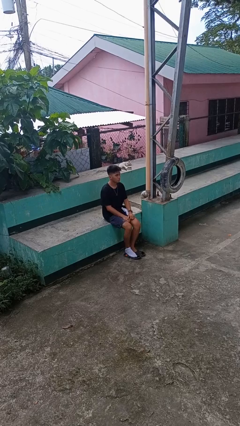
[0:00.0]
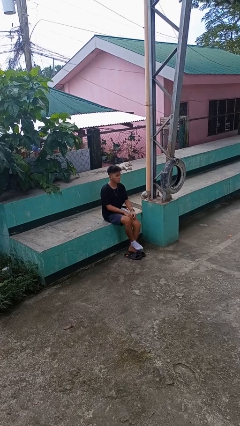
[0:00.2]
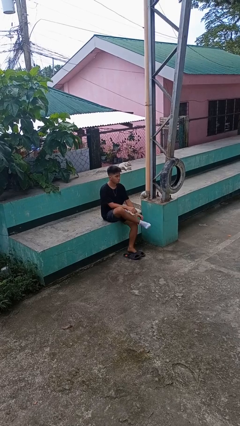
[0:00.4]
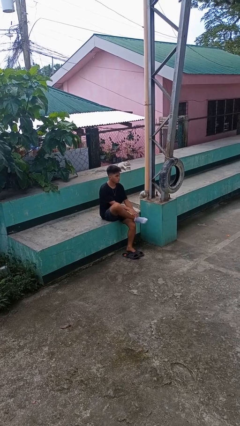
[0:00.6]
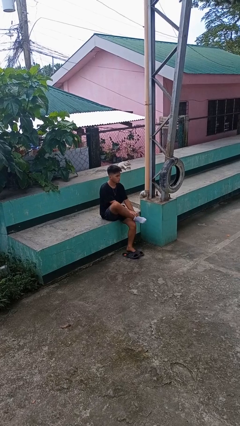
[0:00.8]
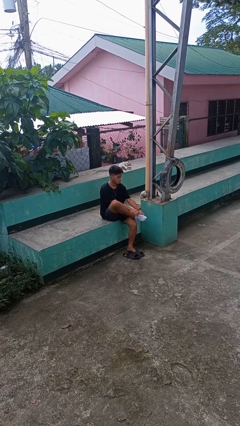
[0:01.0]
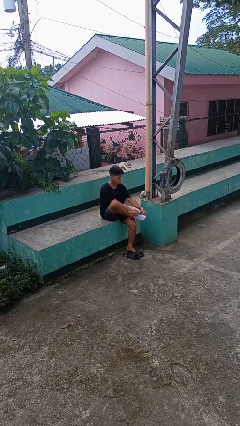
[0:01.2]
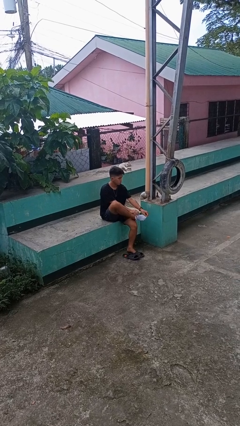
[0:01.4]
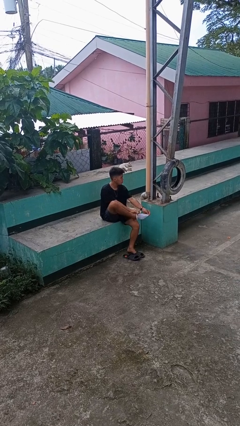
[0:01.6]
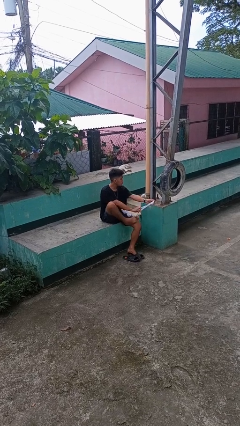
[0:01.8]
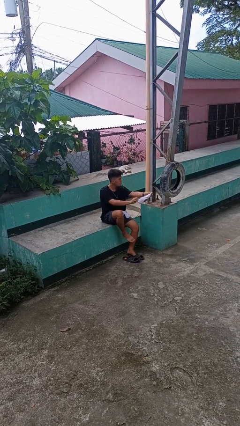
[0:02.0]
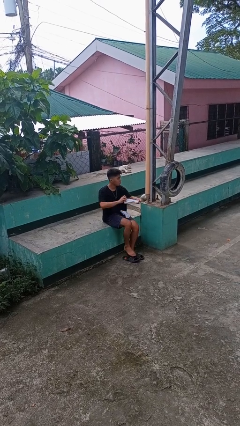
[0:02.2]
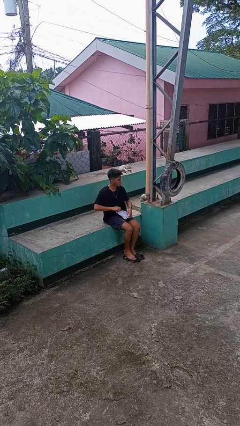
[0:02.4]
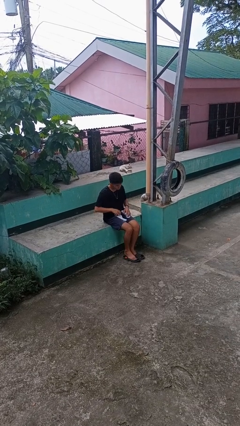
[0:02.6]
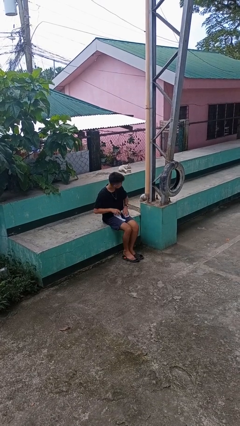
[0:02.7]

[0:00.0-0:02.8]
person takes off socks

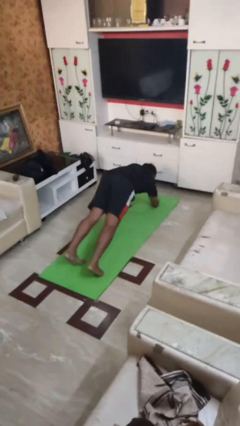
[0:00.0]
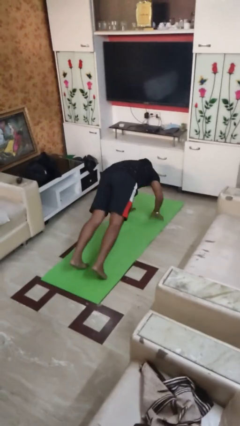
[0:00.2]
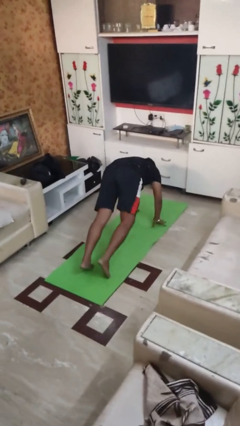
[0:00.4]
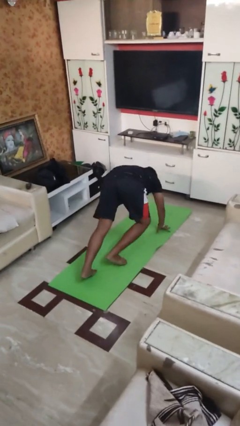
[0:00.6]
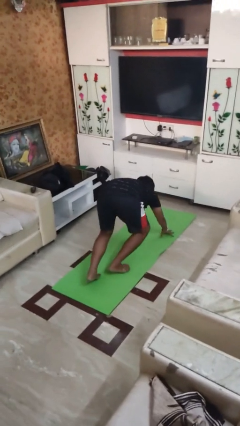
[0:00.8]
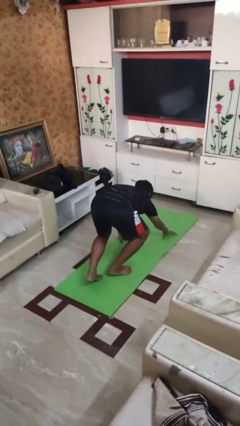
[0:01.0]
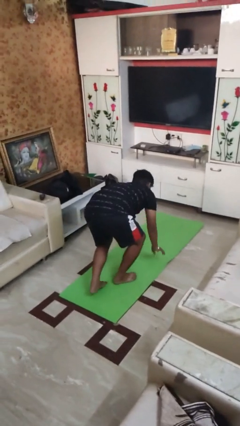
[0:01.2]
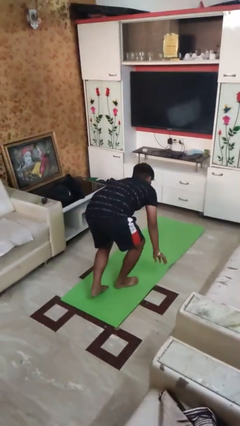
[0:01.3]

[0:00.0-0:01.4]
person stands up from floor

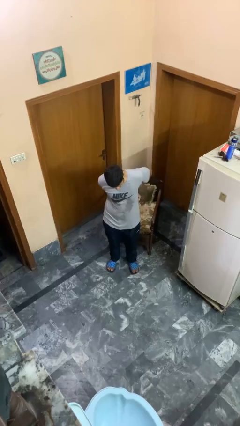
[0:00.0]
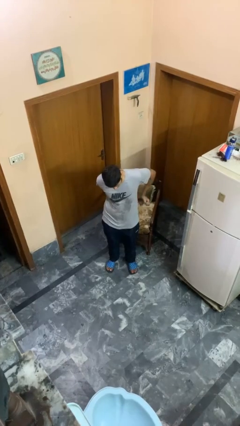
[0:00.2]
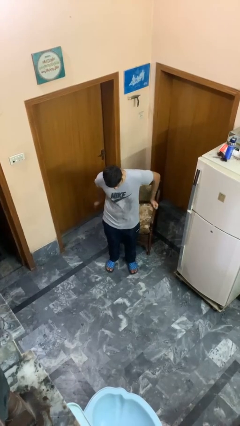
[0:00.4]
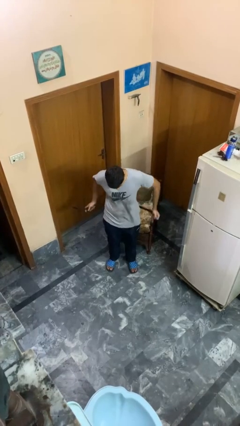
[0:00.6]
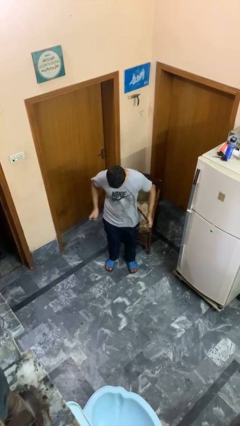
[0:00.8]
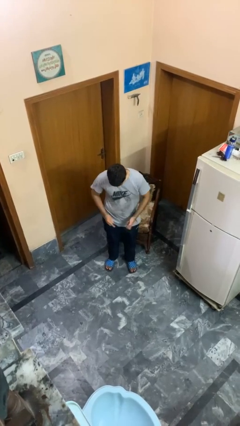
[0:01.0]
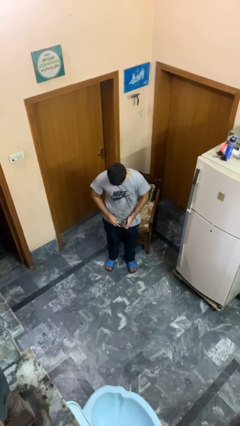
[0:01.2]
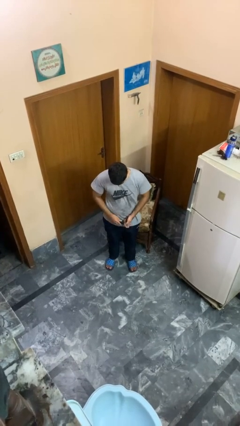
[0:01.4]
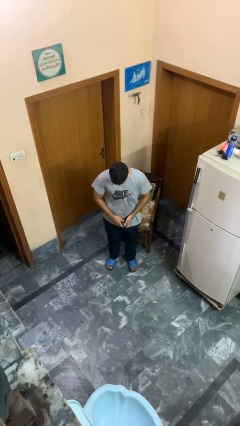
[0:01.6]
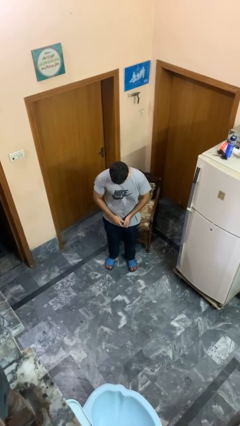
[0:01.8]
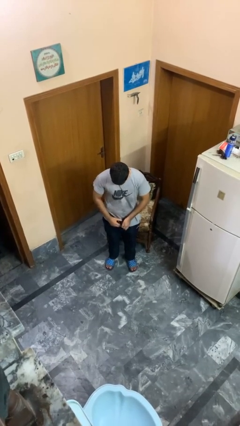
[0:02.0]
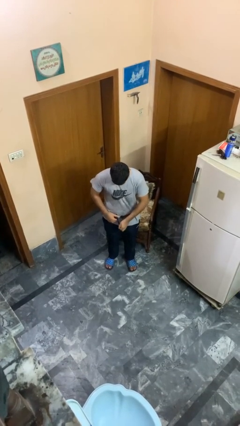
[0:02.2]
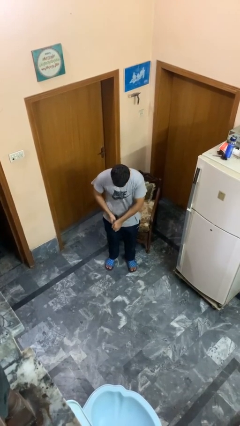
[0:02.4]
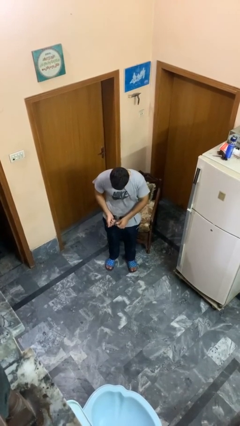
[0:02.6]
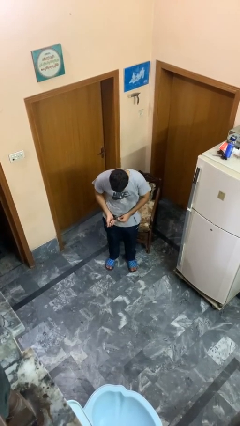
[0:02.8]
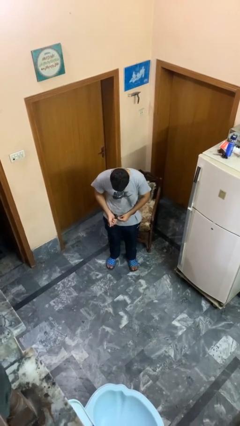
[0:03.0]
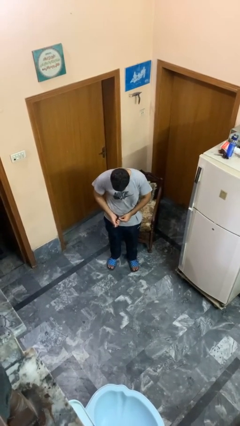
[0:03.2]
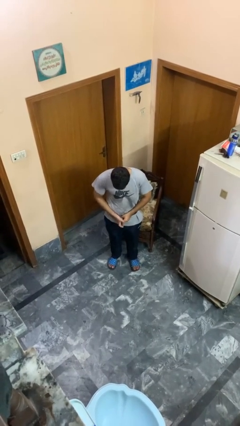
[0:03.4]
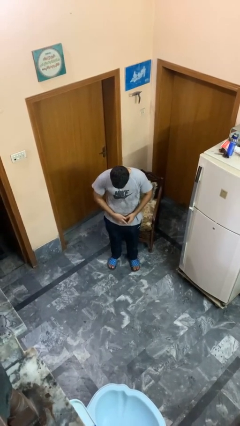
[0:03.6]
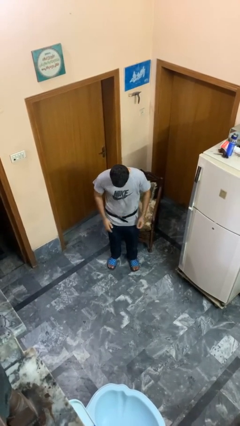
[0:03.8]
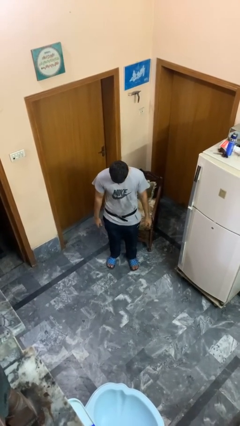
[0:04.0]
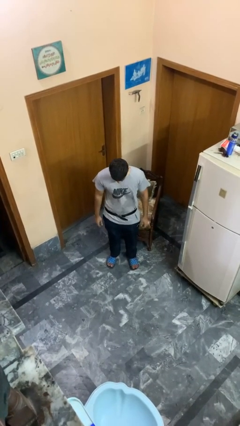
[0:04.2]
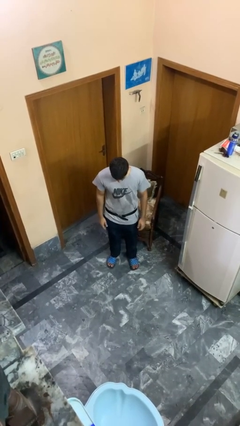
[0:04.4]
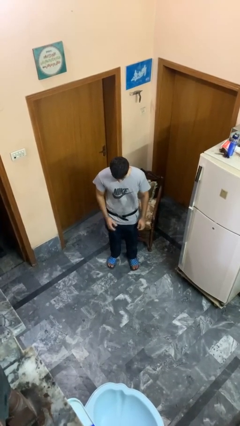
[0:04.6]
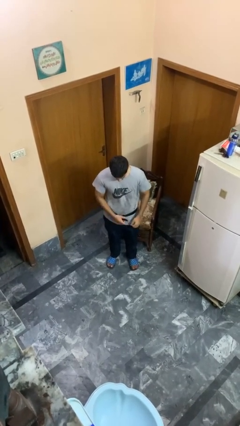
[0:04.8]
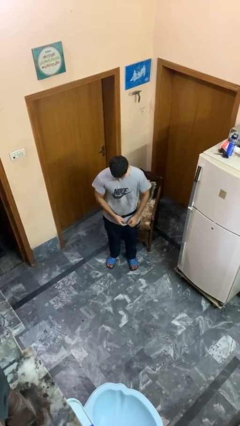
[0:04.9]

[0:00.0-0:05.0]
person puts on belt

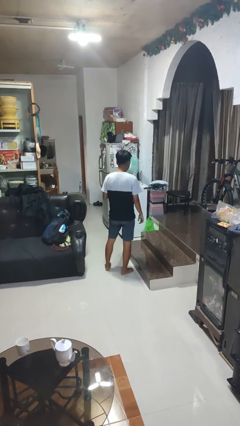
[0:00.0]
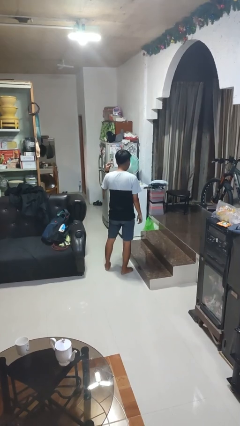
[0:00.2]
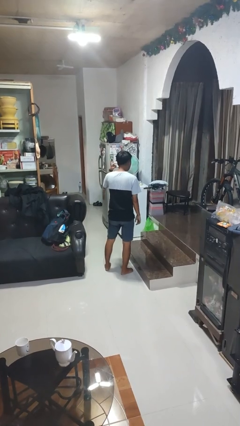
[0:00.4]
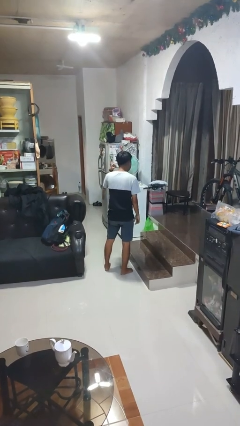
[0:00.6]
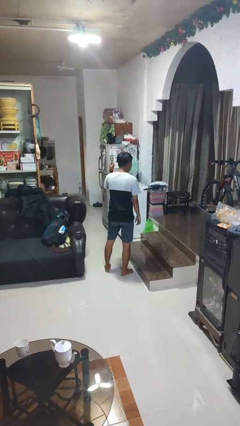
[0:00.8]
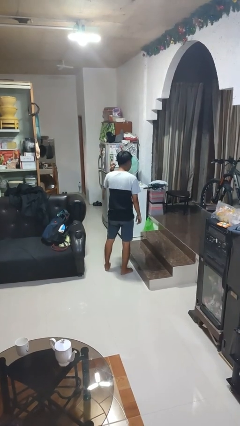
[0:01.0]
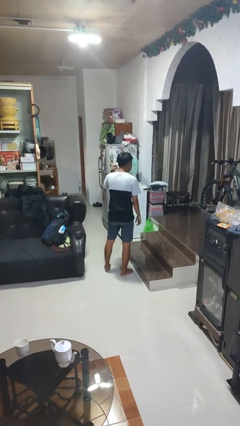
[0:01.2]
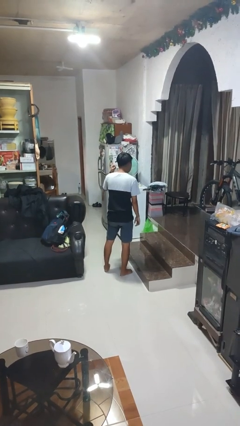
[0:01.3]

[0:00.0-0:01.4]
person gestures listen closely

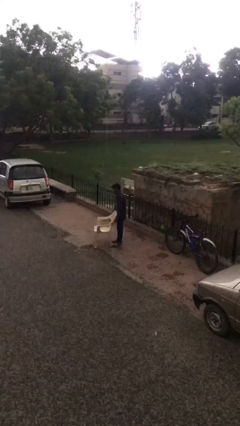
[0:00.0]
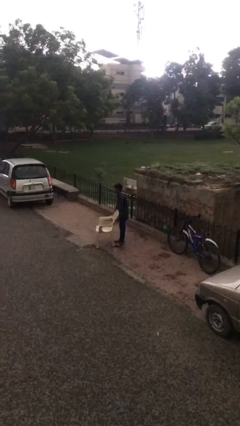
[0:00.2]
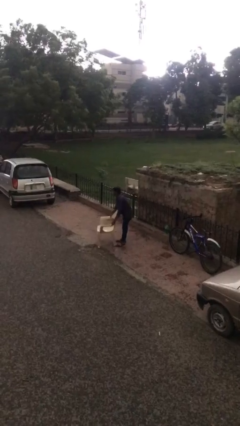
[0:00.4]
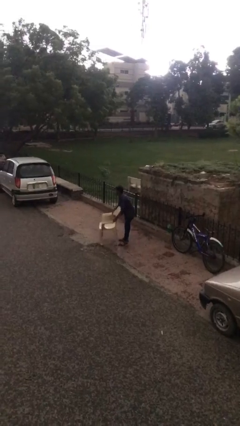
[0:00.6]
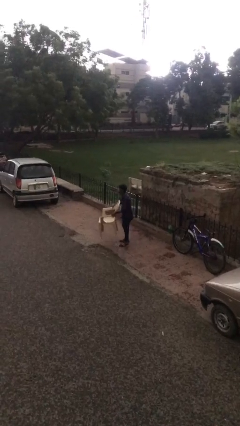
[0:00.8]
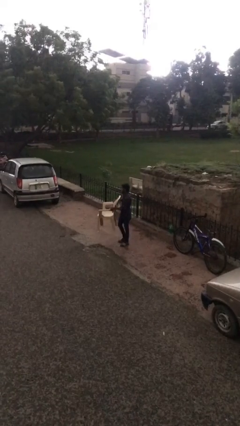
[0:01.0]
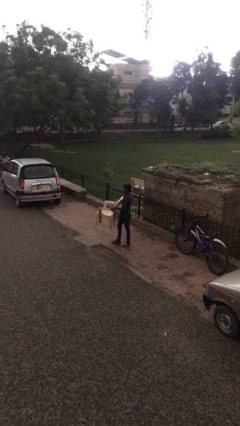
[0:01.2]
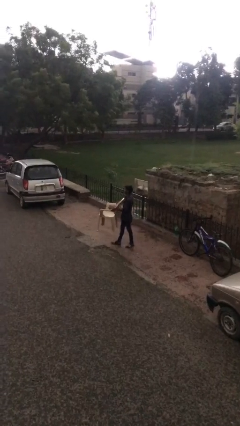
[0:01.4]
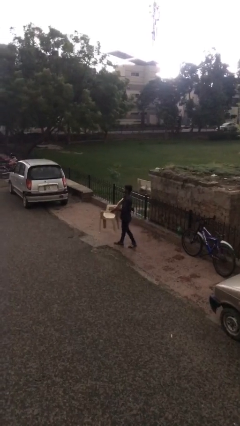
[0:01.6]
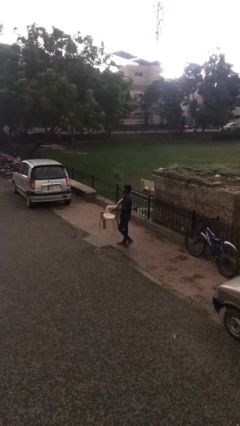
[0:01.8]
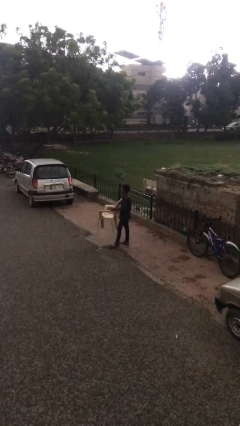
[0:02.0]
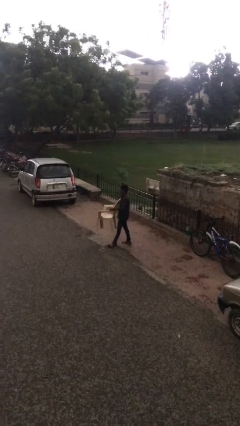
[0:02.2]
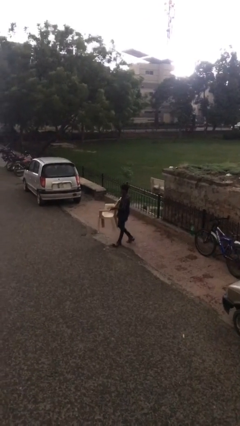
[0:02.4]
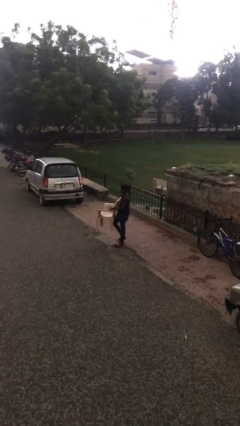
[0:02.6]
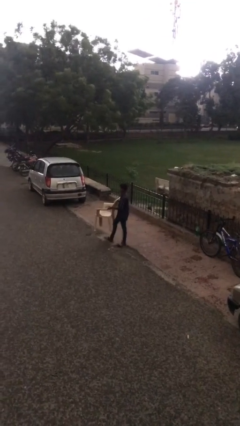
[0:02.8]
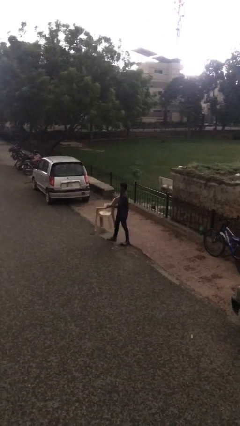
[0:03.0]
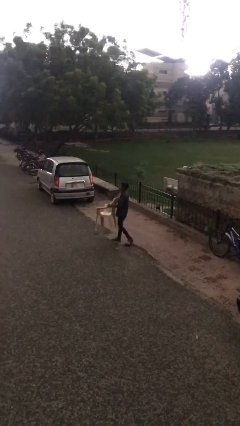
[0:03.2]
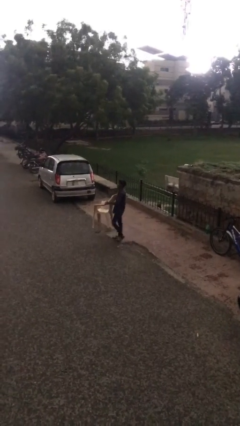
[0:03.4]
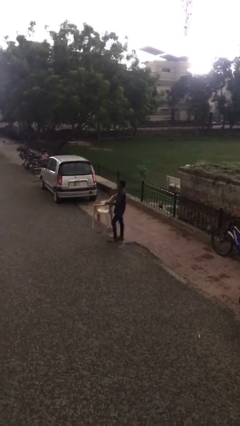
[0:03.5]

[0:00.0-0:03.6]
person carries heavy object

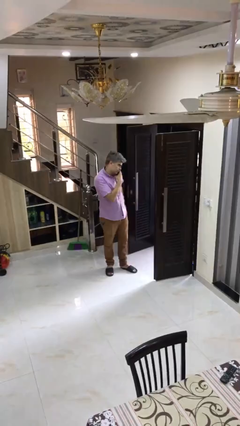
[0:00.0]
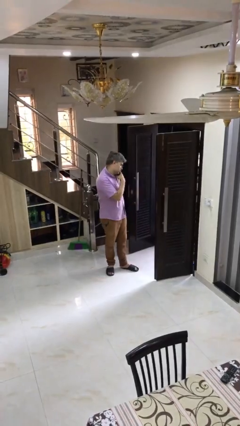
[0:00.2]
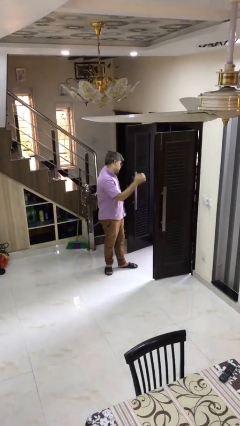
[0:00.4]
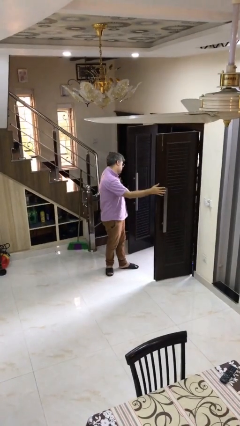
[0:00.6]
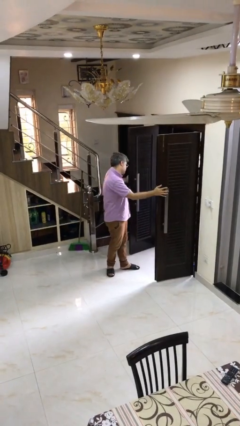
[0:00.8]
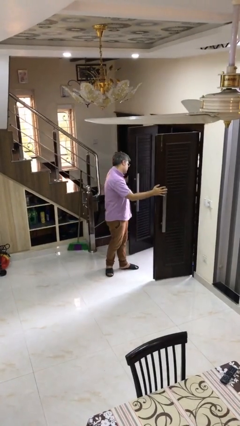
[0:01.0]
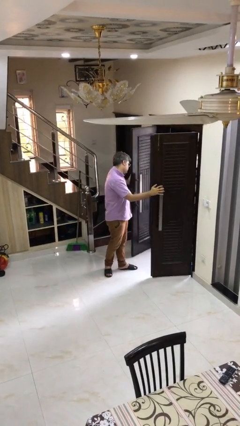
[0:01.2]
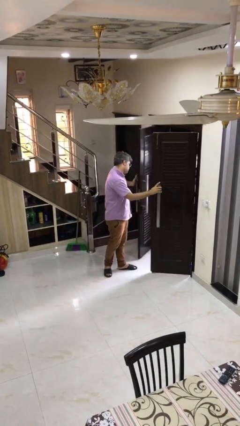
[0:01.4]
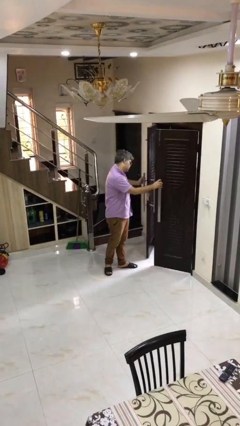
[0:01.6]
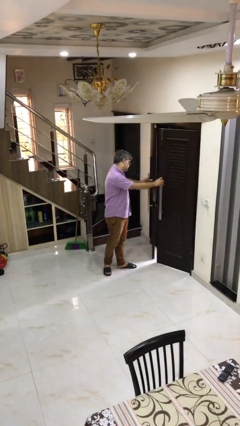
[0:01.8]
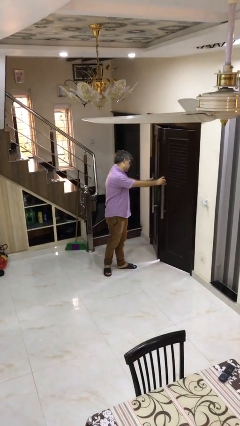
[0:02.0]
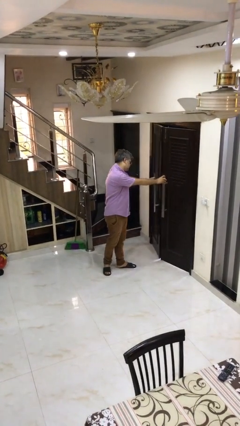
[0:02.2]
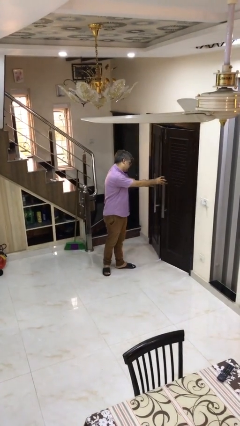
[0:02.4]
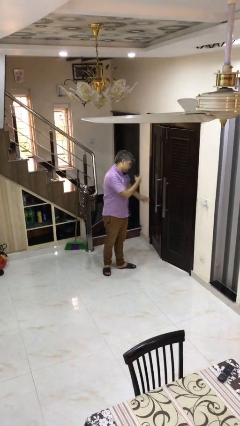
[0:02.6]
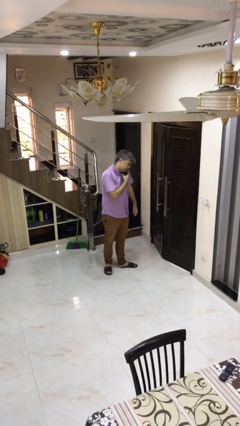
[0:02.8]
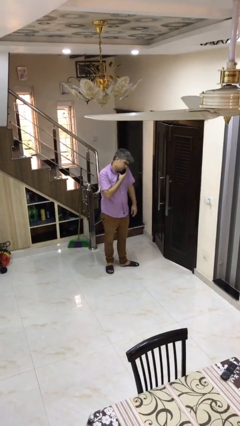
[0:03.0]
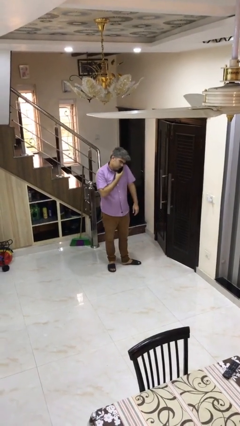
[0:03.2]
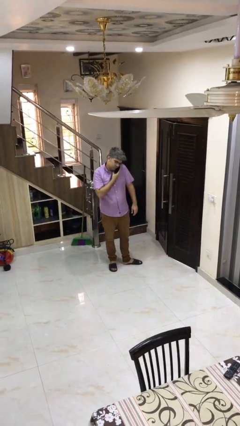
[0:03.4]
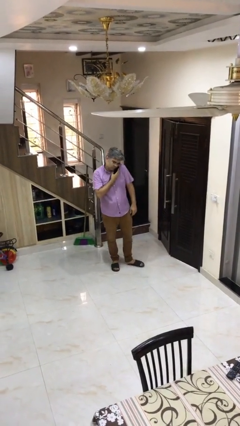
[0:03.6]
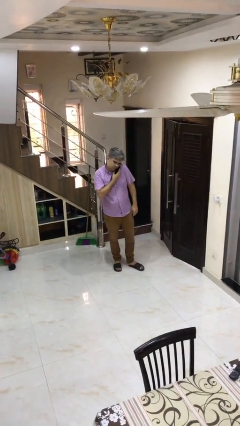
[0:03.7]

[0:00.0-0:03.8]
person closes facility door
